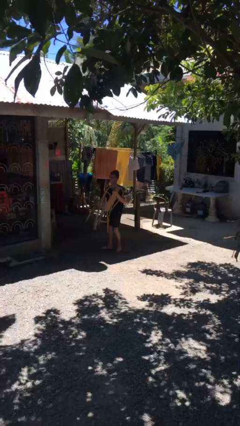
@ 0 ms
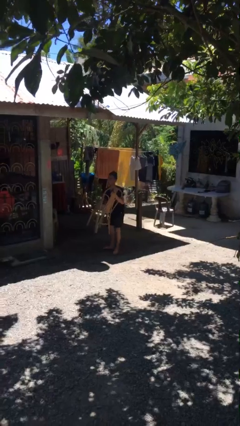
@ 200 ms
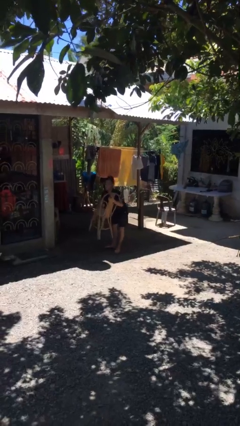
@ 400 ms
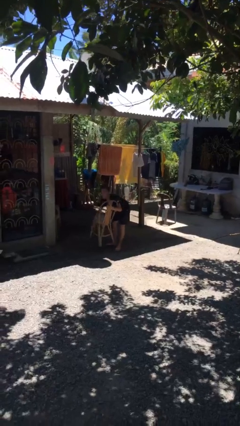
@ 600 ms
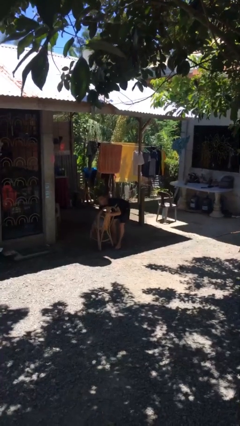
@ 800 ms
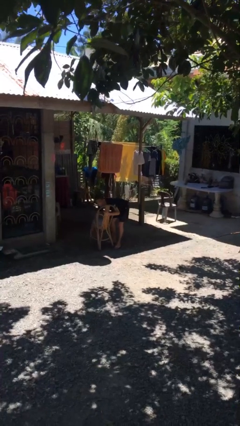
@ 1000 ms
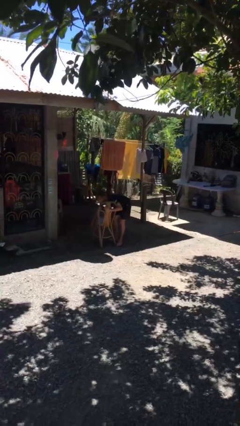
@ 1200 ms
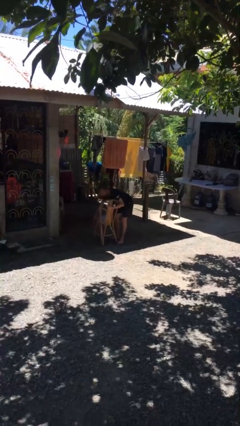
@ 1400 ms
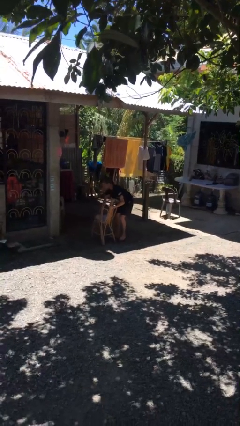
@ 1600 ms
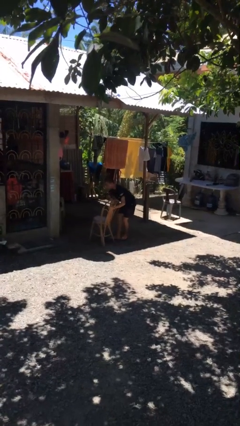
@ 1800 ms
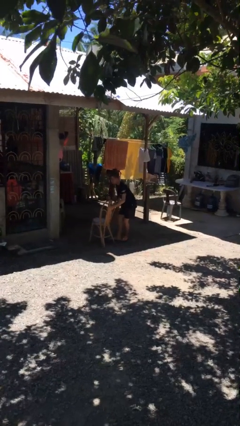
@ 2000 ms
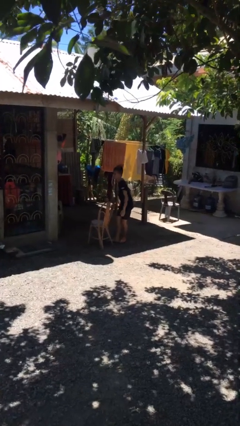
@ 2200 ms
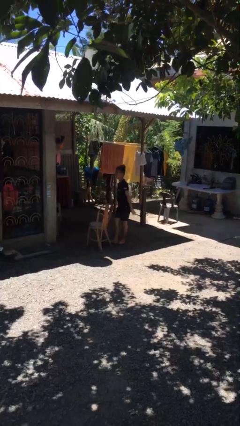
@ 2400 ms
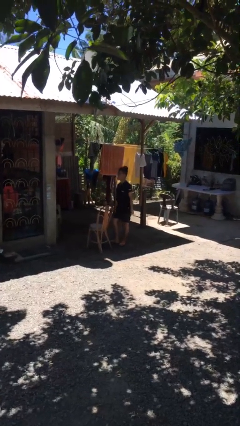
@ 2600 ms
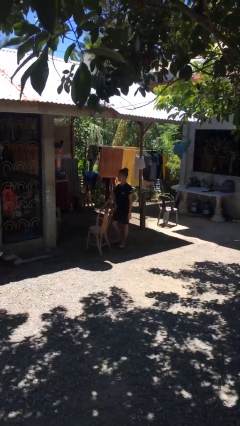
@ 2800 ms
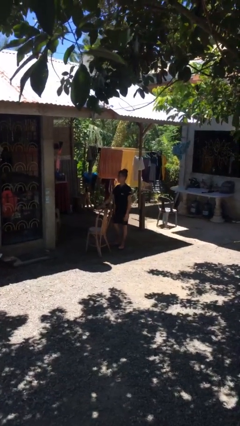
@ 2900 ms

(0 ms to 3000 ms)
person puts down object on floor

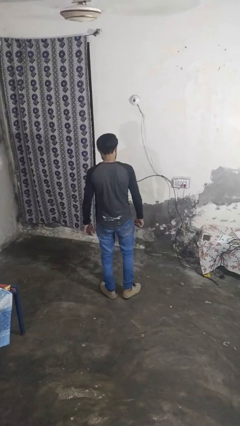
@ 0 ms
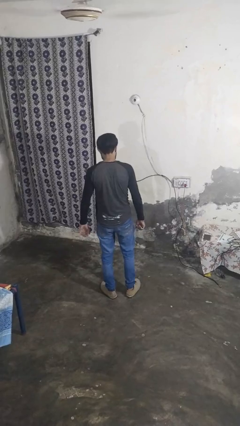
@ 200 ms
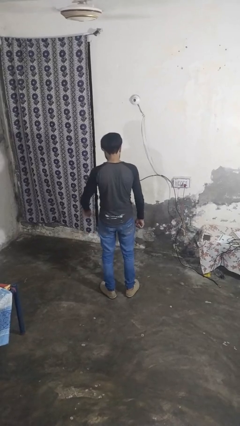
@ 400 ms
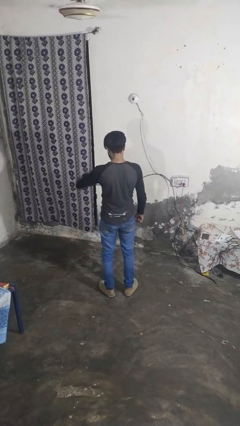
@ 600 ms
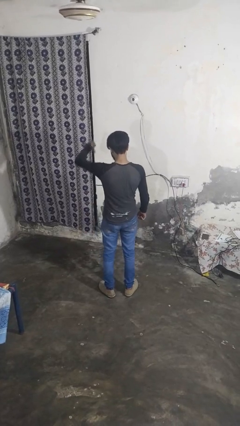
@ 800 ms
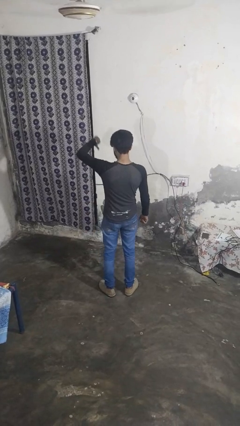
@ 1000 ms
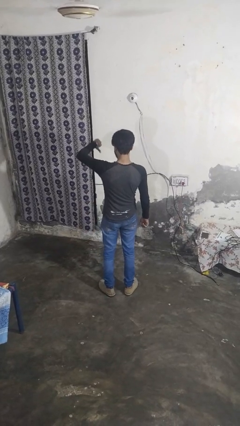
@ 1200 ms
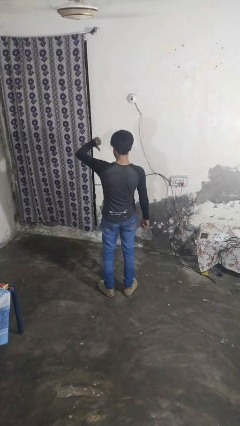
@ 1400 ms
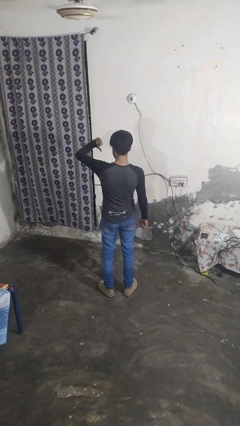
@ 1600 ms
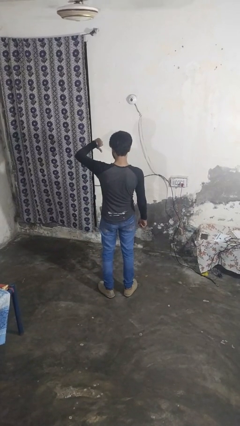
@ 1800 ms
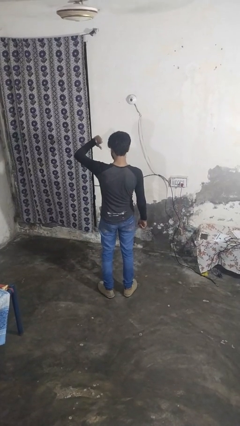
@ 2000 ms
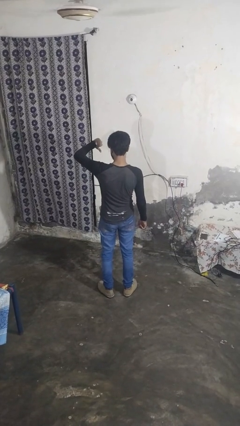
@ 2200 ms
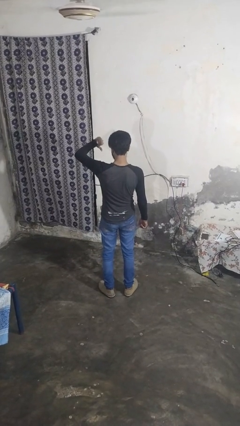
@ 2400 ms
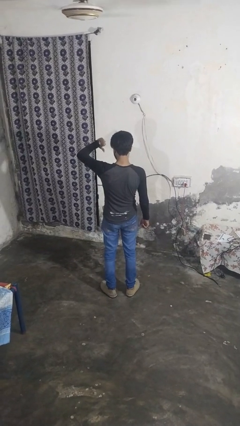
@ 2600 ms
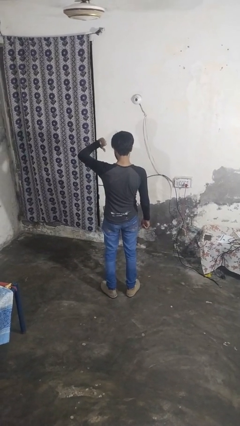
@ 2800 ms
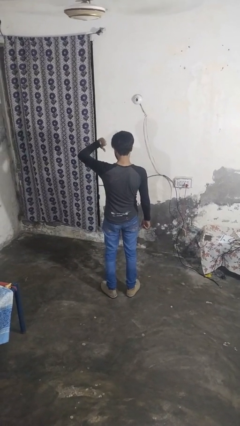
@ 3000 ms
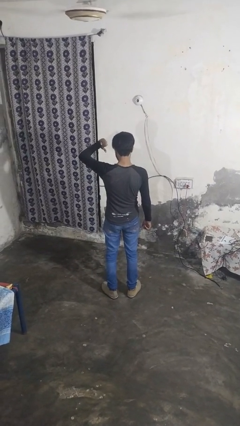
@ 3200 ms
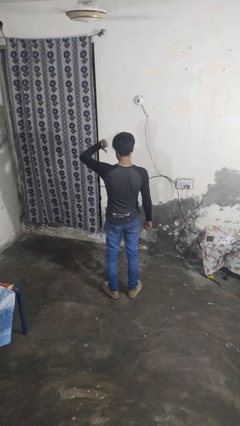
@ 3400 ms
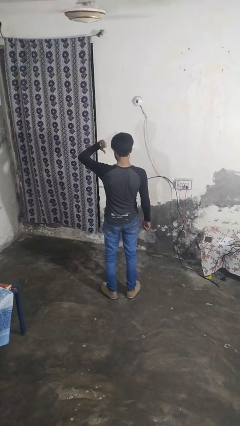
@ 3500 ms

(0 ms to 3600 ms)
person gestures thumbs down

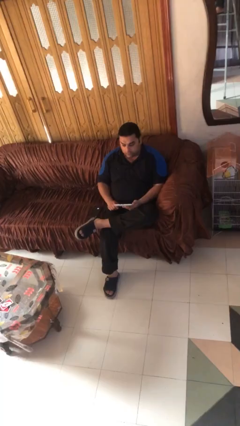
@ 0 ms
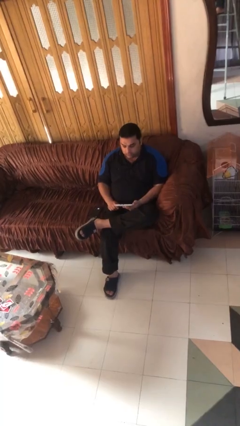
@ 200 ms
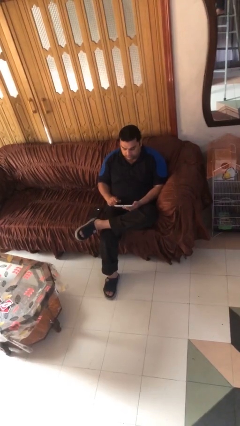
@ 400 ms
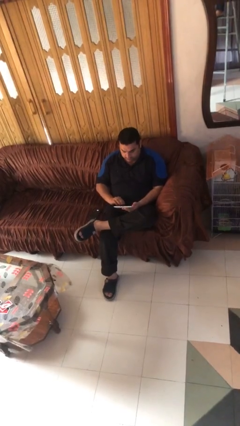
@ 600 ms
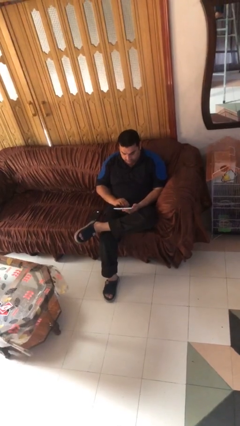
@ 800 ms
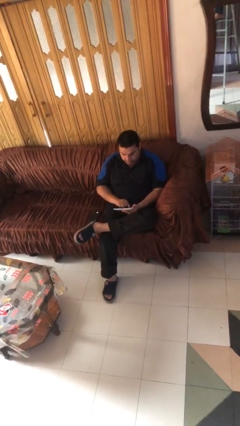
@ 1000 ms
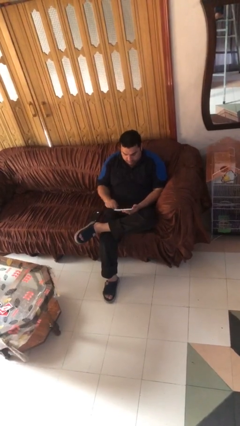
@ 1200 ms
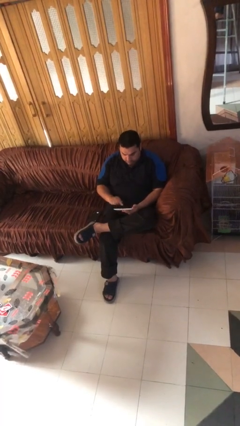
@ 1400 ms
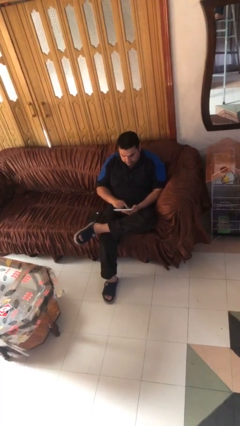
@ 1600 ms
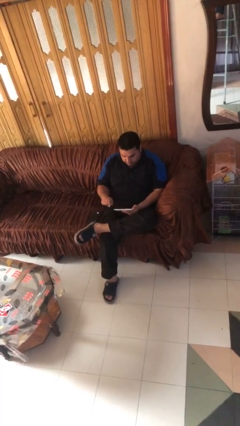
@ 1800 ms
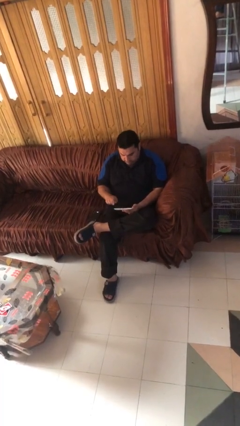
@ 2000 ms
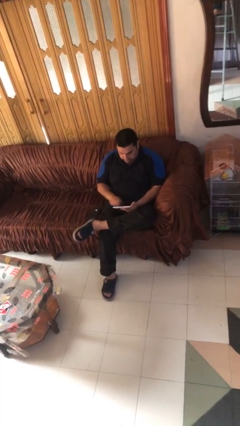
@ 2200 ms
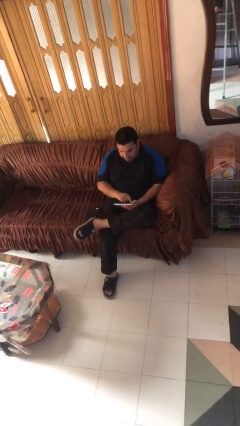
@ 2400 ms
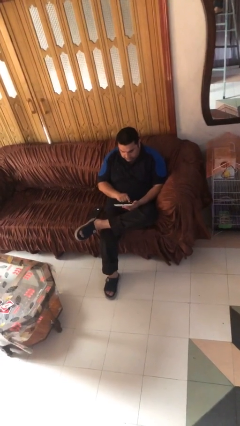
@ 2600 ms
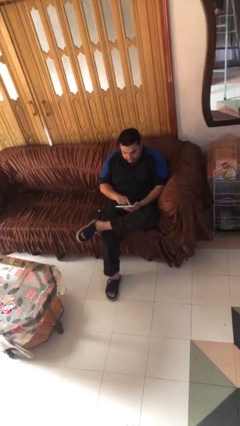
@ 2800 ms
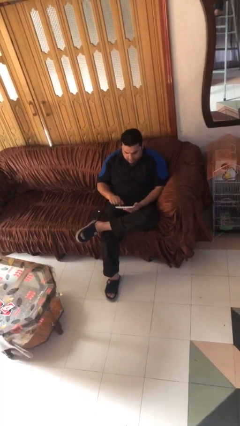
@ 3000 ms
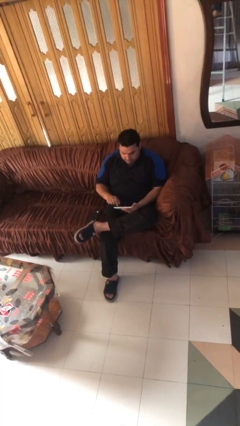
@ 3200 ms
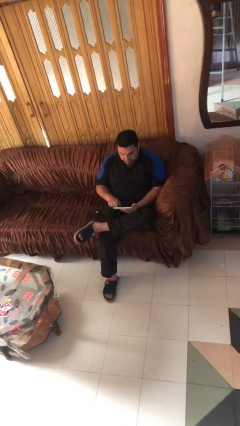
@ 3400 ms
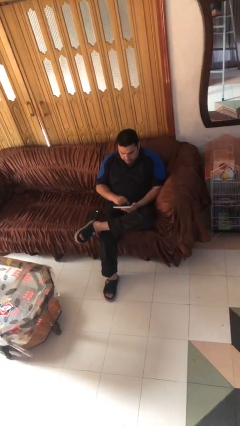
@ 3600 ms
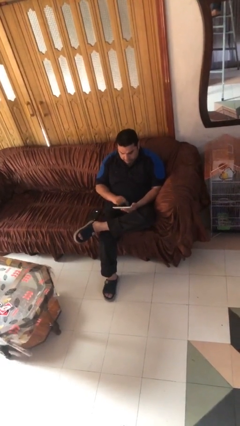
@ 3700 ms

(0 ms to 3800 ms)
person interacts with tablet

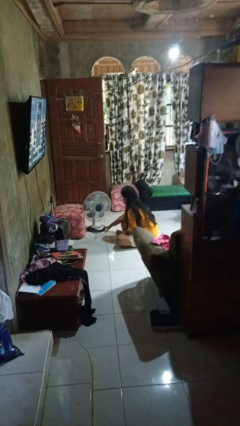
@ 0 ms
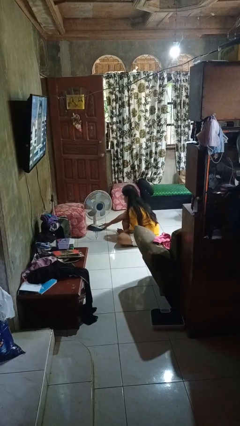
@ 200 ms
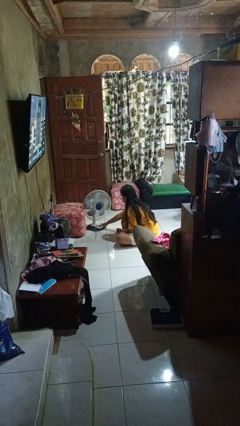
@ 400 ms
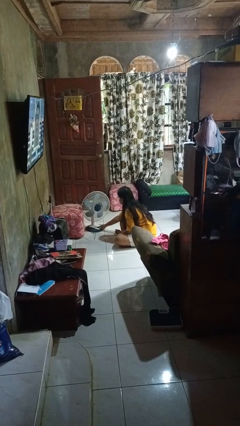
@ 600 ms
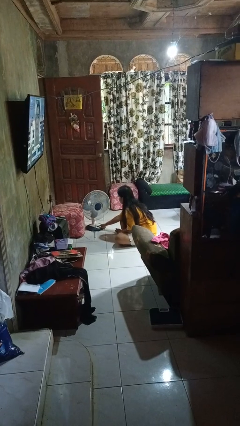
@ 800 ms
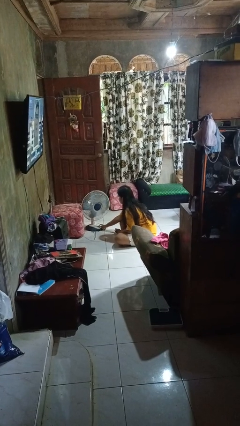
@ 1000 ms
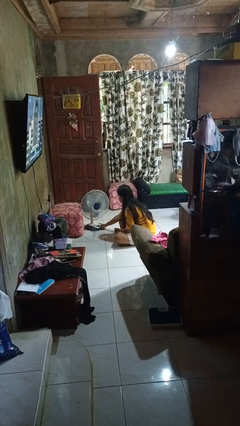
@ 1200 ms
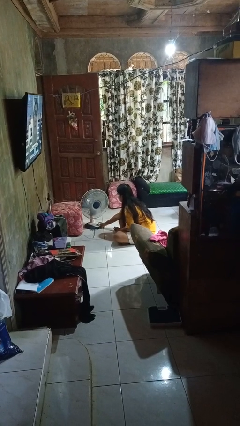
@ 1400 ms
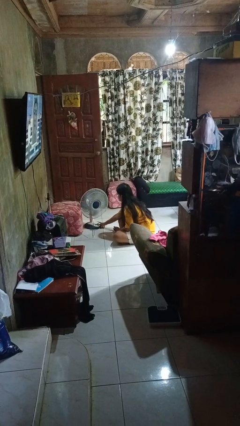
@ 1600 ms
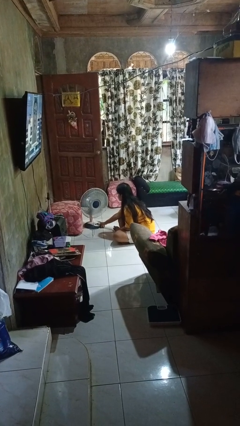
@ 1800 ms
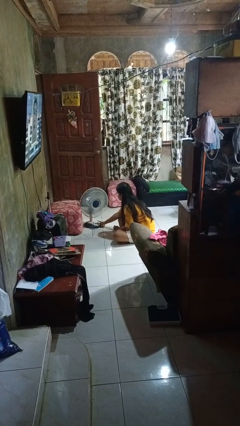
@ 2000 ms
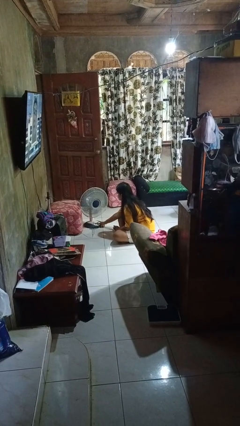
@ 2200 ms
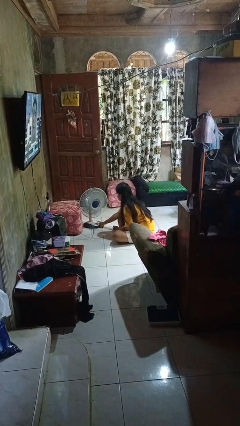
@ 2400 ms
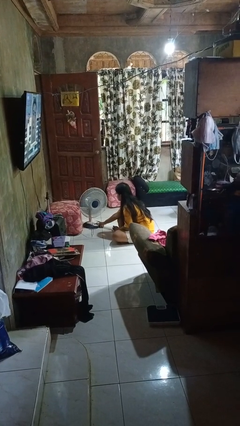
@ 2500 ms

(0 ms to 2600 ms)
person turns on fan

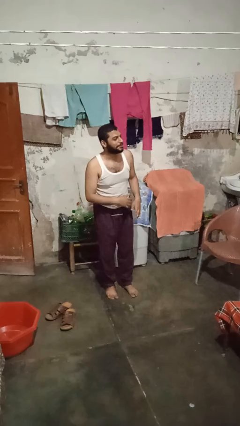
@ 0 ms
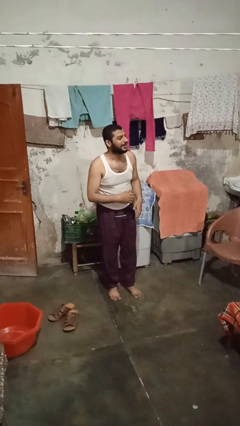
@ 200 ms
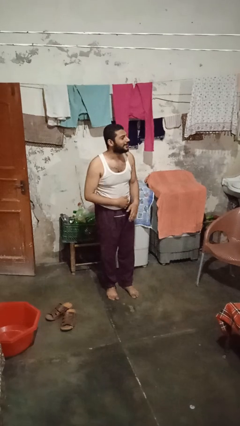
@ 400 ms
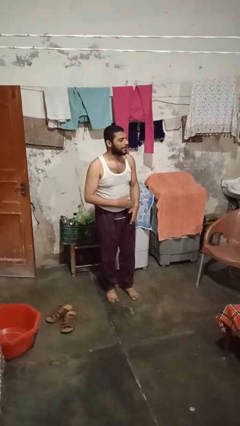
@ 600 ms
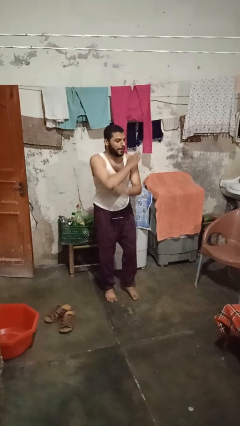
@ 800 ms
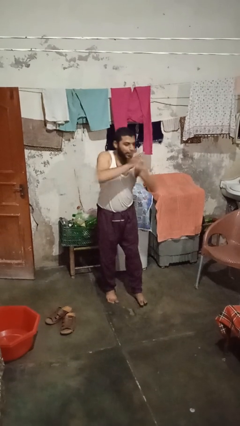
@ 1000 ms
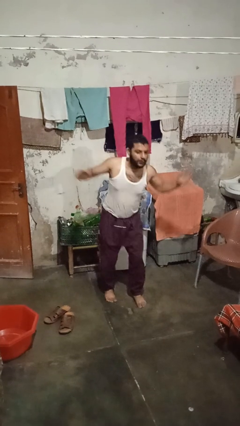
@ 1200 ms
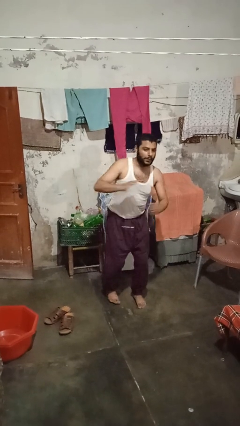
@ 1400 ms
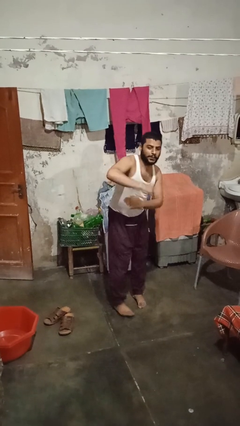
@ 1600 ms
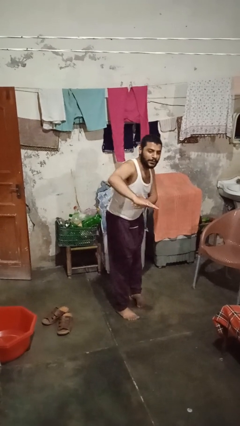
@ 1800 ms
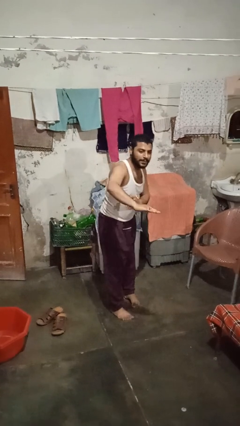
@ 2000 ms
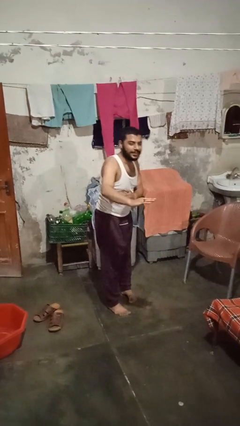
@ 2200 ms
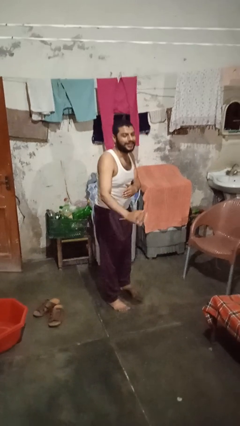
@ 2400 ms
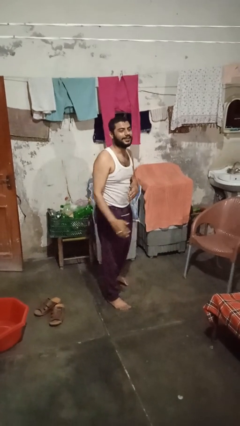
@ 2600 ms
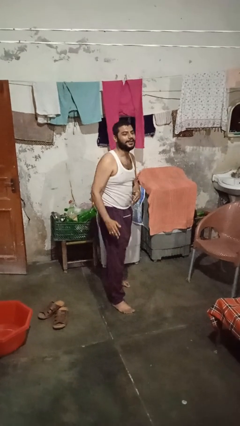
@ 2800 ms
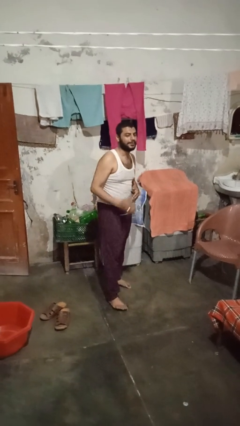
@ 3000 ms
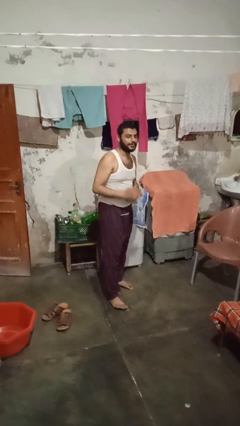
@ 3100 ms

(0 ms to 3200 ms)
person karate chop

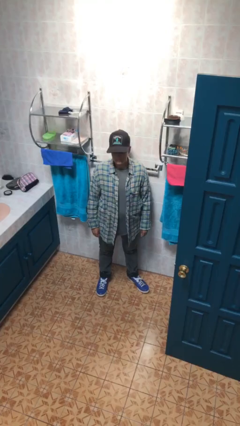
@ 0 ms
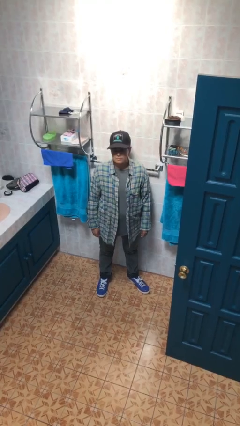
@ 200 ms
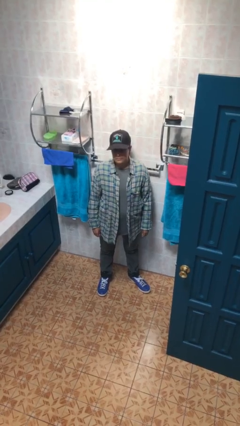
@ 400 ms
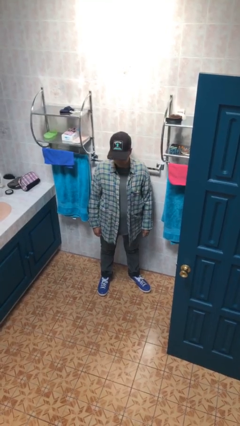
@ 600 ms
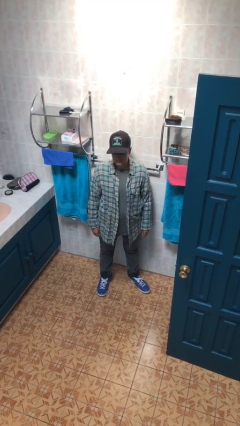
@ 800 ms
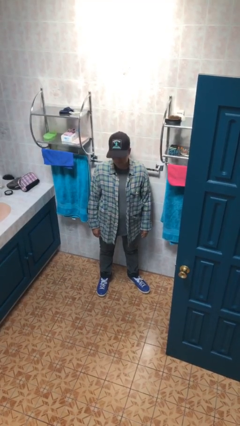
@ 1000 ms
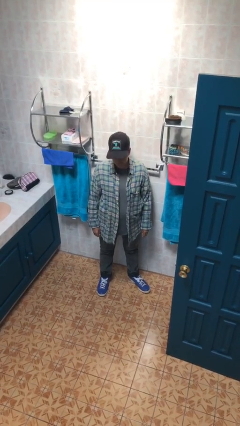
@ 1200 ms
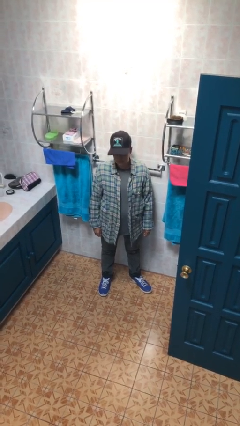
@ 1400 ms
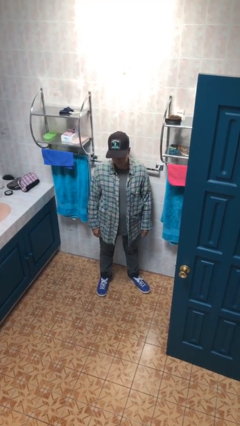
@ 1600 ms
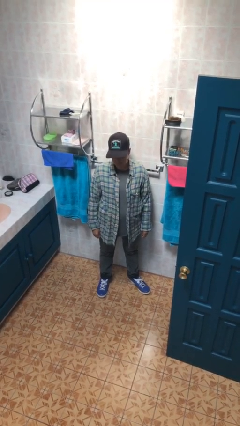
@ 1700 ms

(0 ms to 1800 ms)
person nods head
